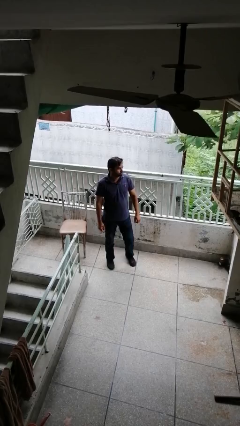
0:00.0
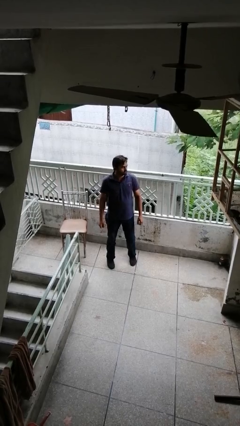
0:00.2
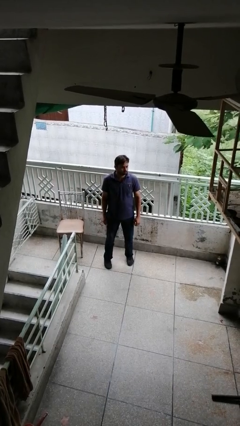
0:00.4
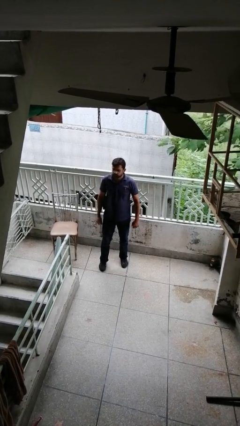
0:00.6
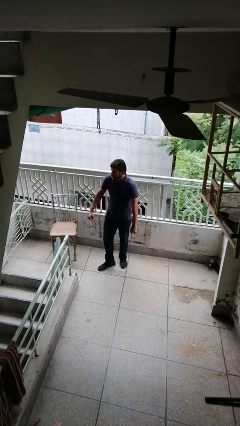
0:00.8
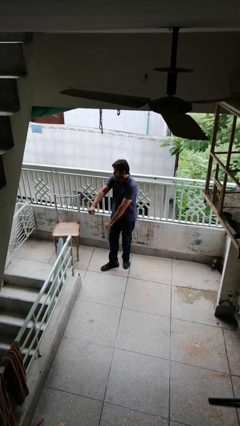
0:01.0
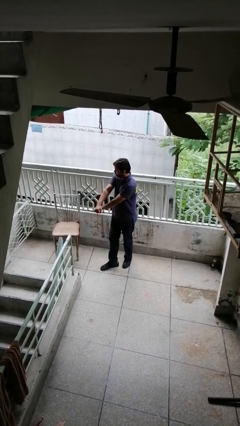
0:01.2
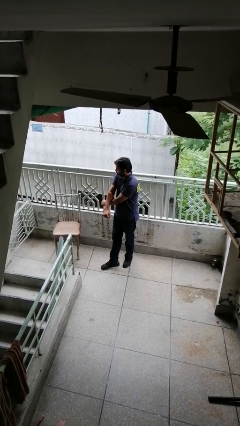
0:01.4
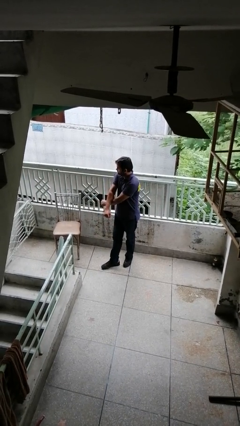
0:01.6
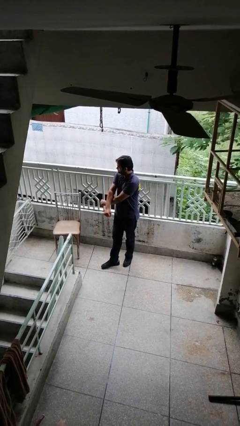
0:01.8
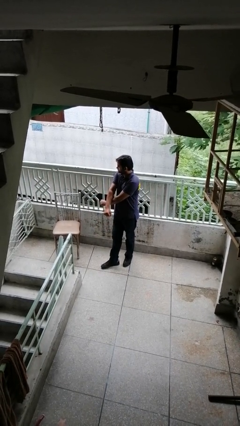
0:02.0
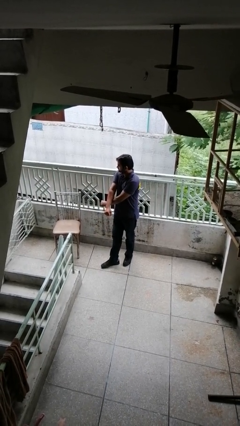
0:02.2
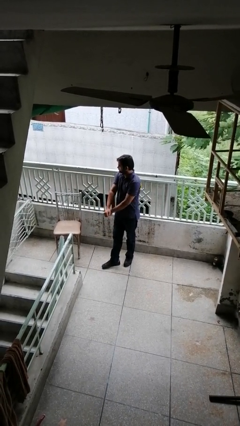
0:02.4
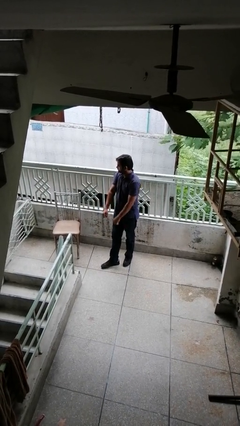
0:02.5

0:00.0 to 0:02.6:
person gestures arms x

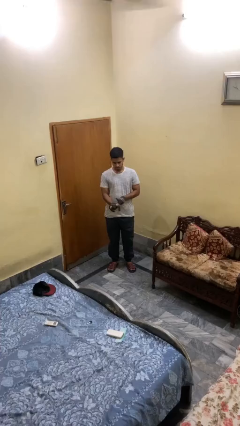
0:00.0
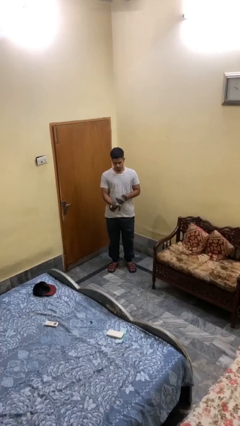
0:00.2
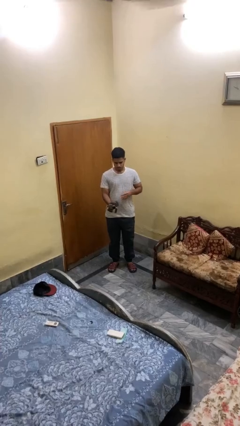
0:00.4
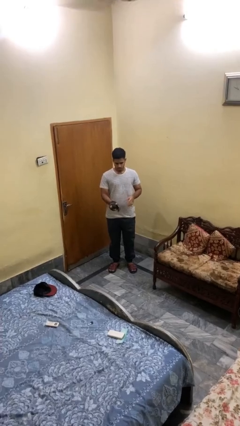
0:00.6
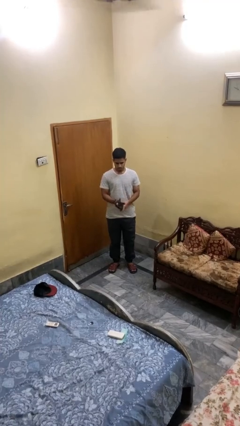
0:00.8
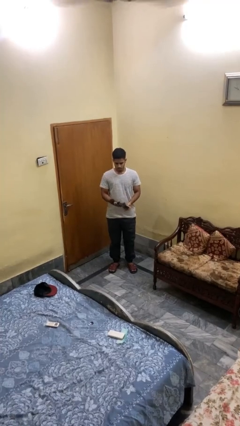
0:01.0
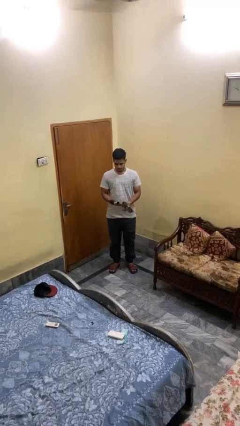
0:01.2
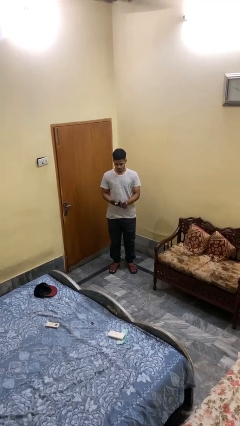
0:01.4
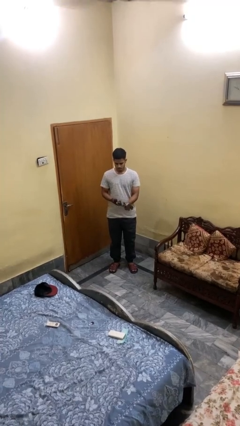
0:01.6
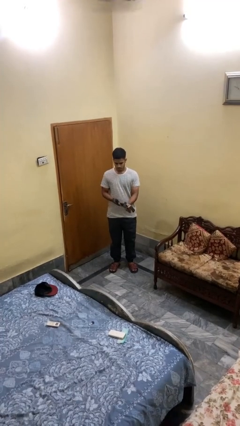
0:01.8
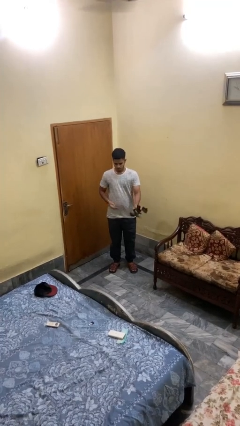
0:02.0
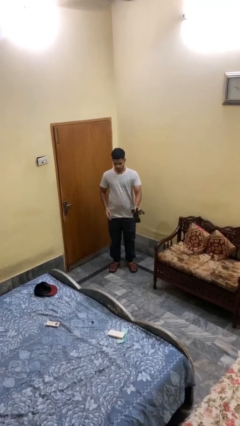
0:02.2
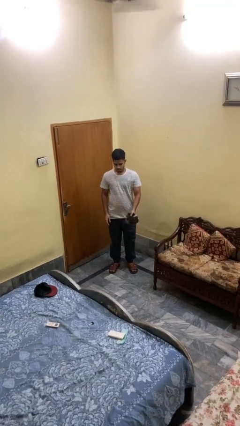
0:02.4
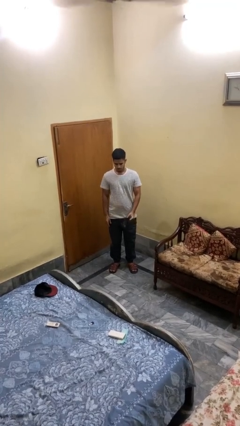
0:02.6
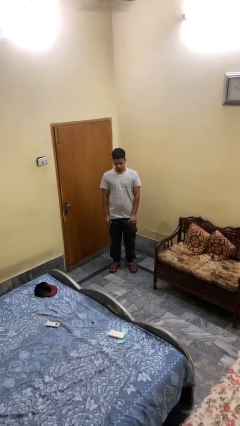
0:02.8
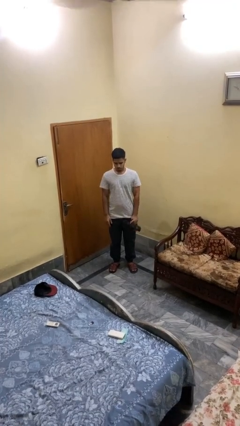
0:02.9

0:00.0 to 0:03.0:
person takes off gloves

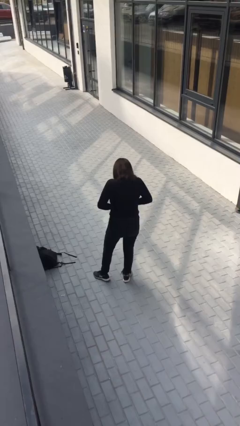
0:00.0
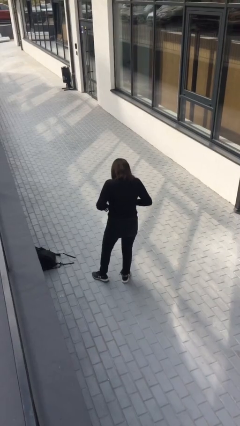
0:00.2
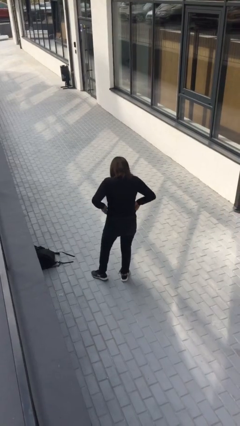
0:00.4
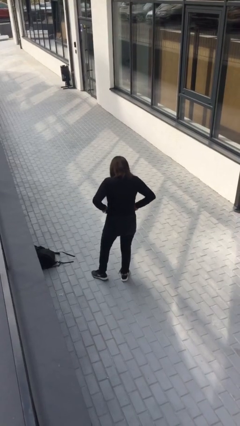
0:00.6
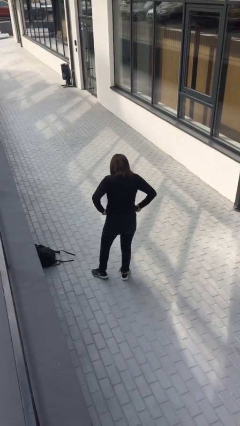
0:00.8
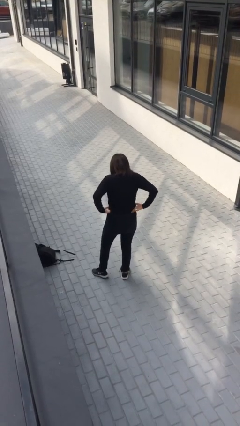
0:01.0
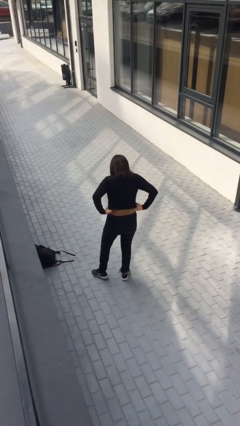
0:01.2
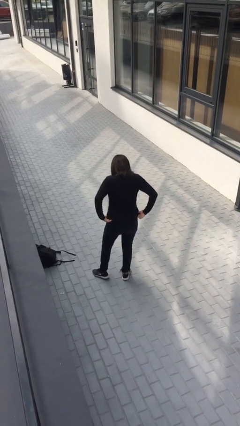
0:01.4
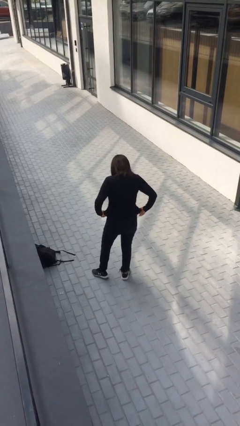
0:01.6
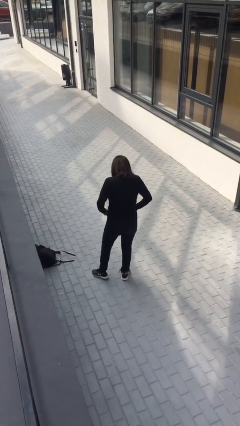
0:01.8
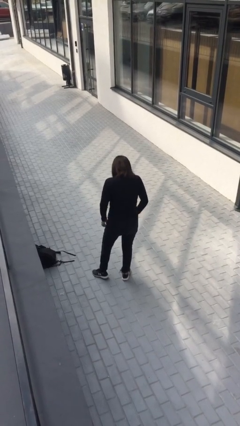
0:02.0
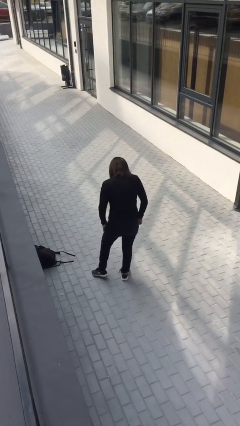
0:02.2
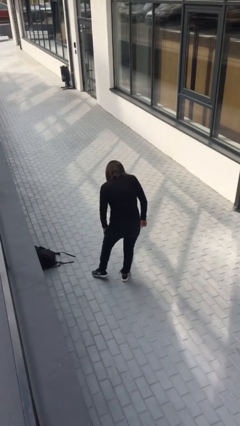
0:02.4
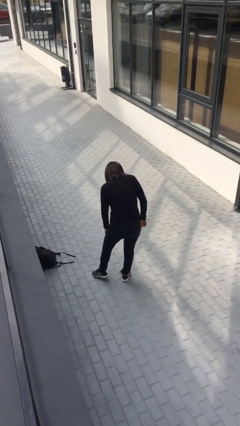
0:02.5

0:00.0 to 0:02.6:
person untucks shirt

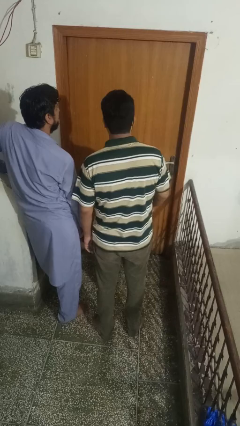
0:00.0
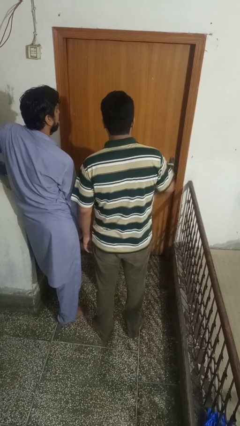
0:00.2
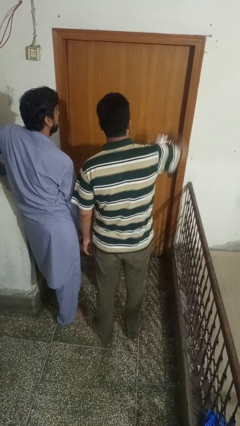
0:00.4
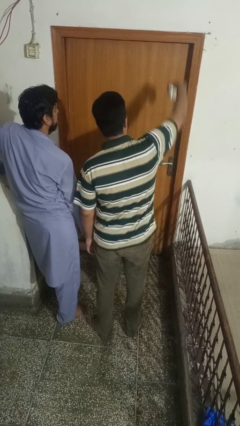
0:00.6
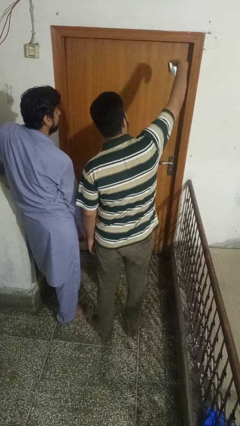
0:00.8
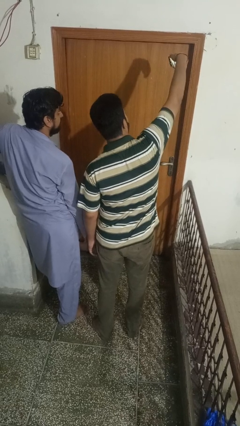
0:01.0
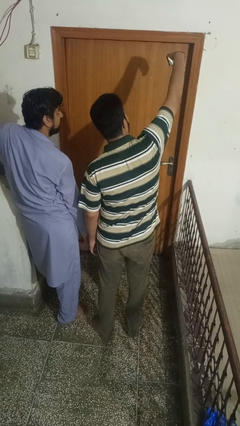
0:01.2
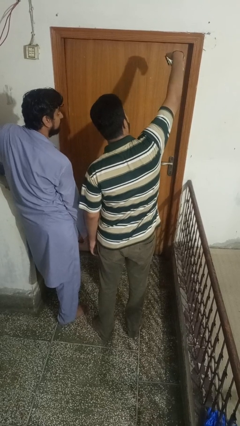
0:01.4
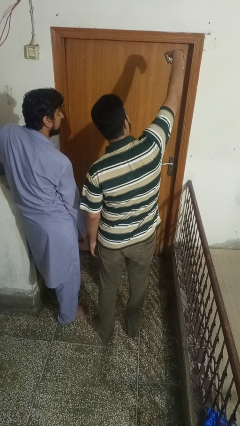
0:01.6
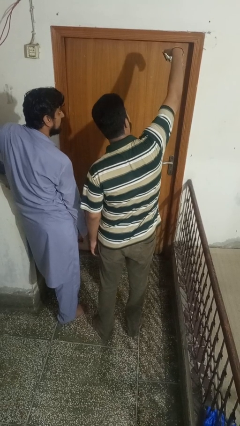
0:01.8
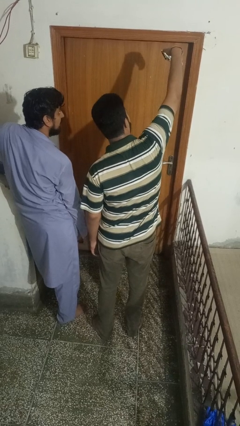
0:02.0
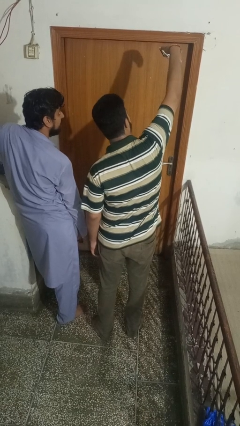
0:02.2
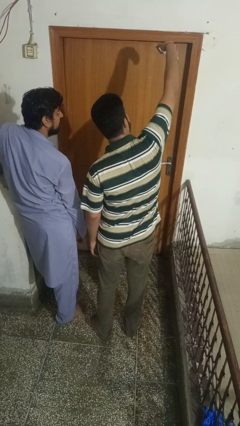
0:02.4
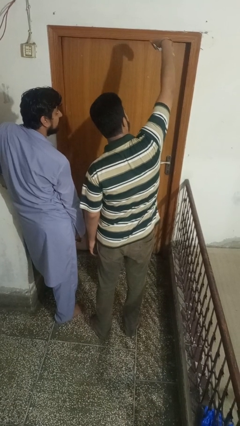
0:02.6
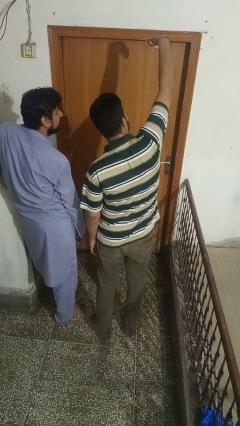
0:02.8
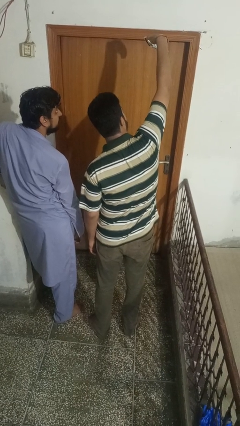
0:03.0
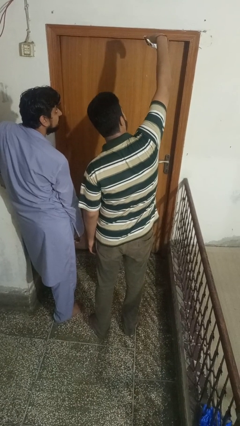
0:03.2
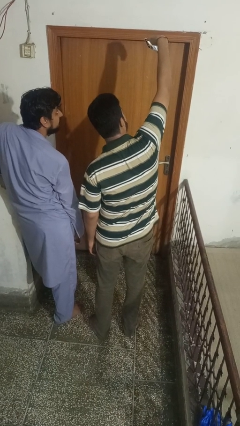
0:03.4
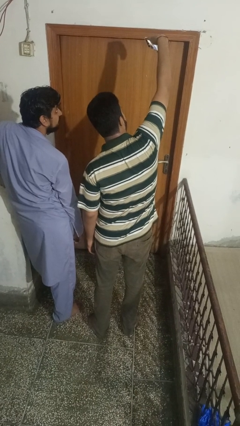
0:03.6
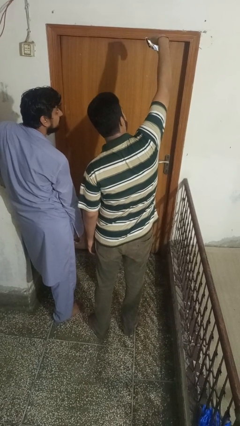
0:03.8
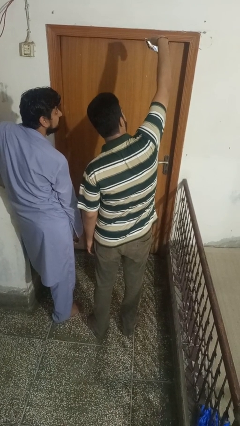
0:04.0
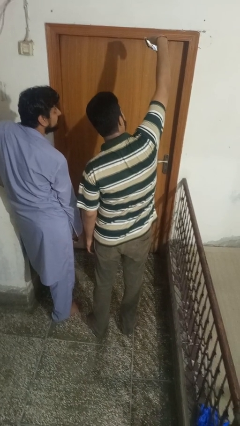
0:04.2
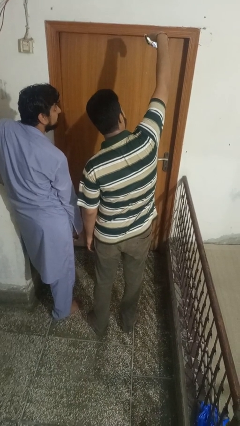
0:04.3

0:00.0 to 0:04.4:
person takes selfie with person

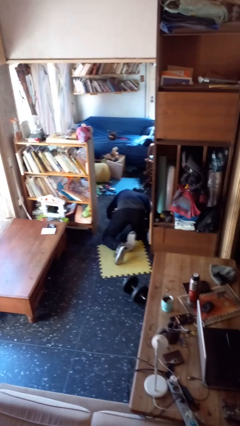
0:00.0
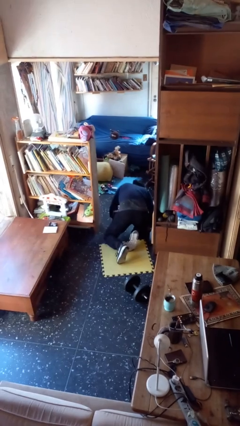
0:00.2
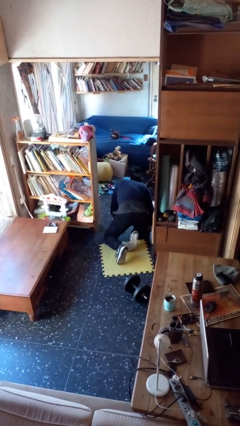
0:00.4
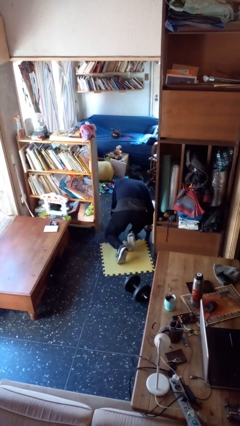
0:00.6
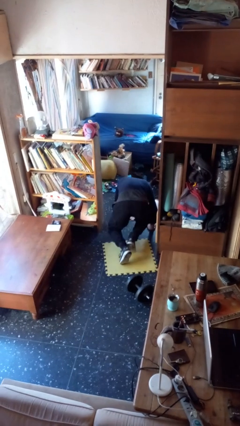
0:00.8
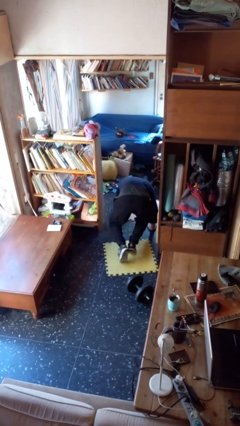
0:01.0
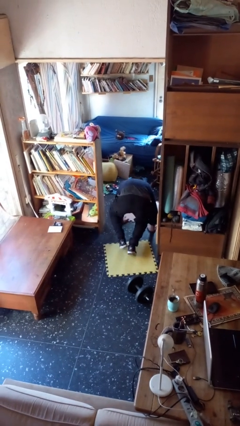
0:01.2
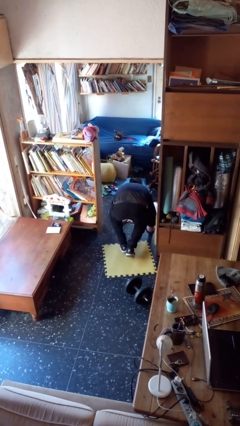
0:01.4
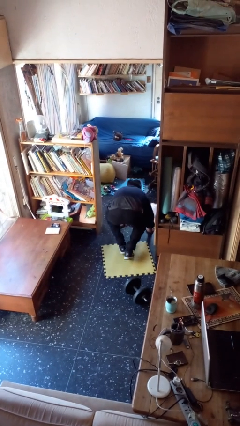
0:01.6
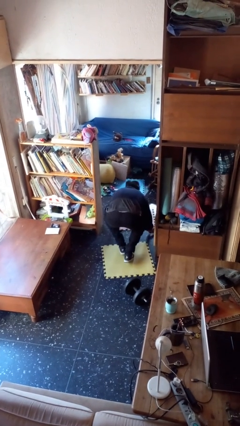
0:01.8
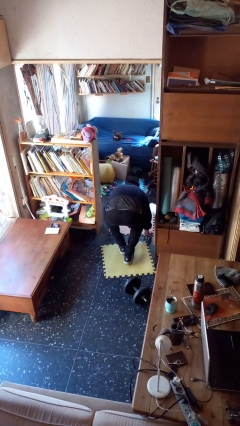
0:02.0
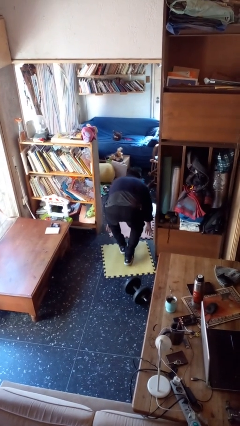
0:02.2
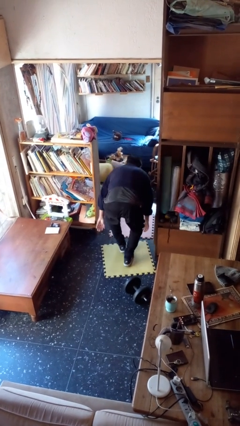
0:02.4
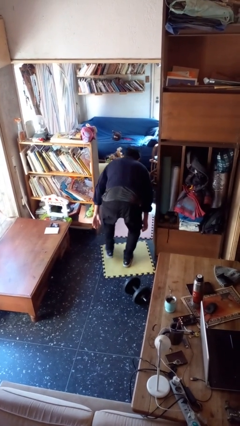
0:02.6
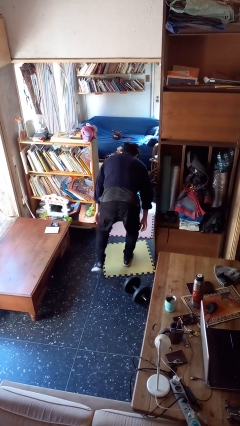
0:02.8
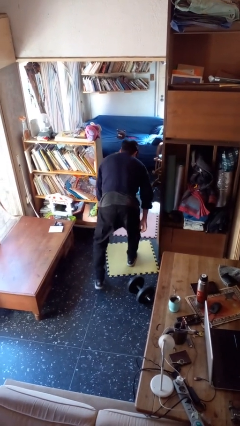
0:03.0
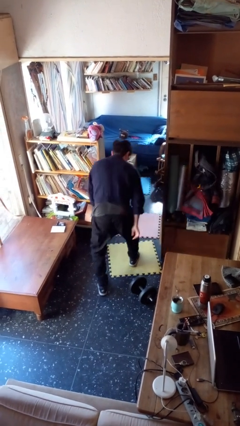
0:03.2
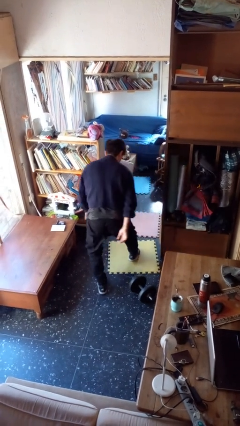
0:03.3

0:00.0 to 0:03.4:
person stands up from floor

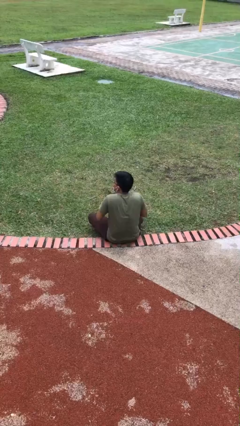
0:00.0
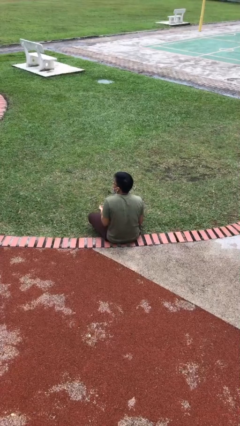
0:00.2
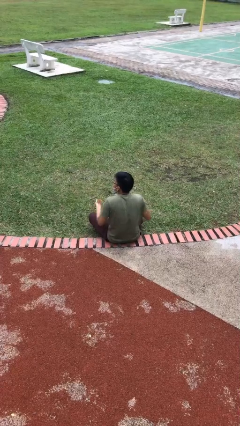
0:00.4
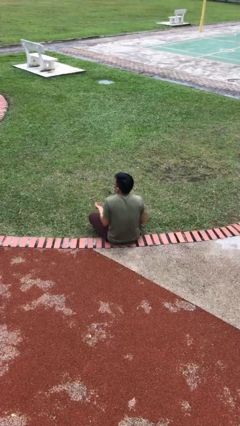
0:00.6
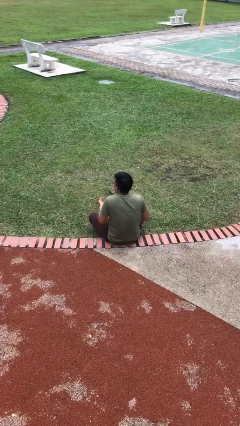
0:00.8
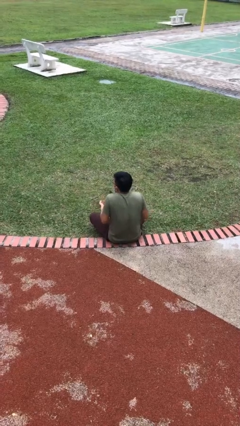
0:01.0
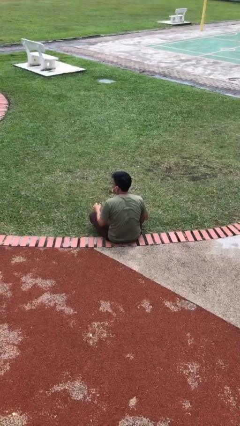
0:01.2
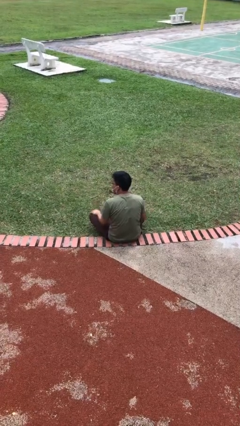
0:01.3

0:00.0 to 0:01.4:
person shrugs

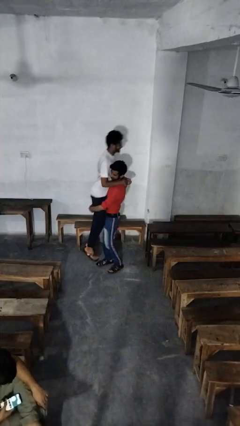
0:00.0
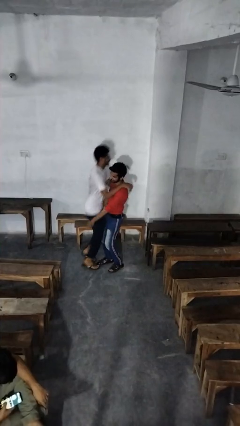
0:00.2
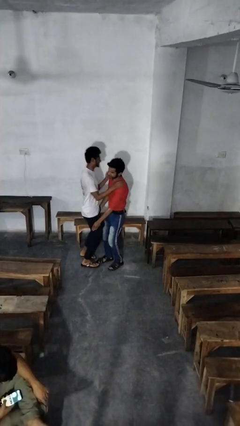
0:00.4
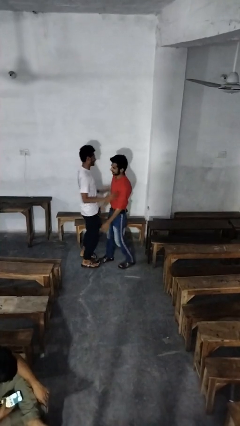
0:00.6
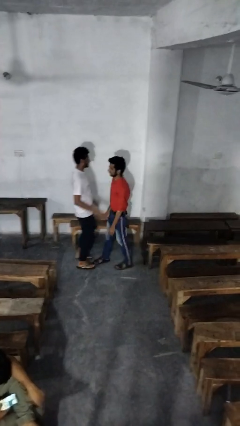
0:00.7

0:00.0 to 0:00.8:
person puts down person
